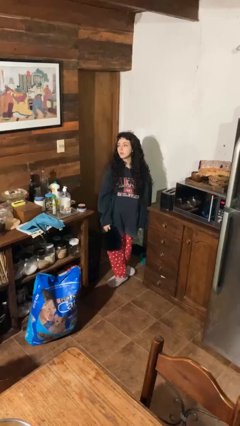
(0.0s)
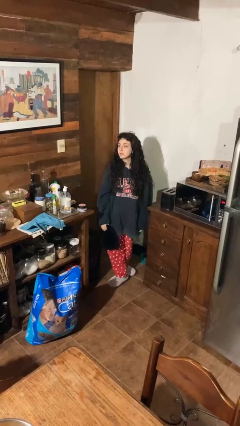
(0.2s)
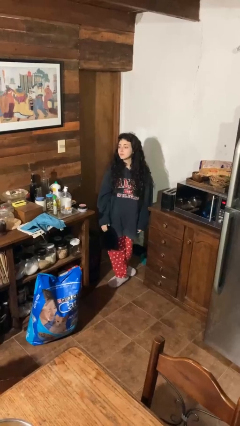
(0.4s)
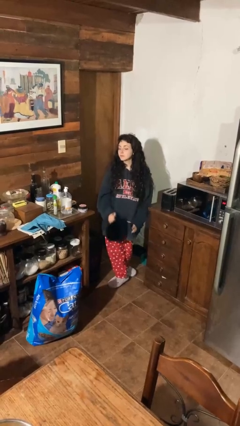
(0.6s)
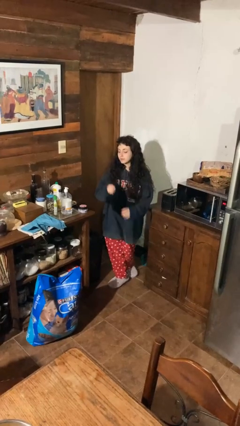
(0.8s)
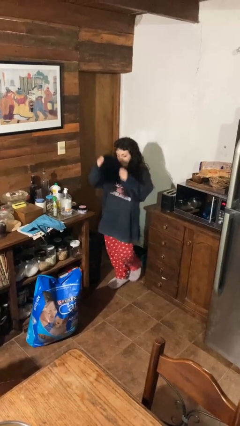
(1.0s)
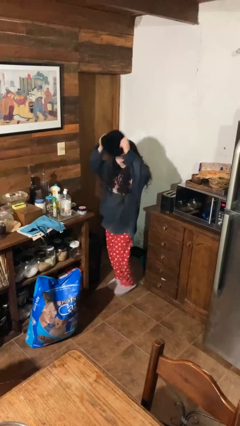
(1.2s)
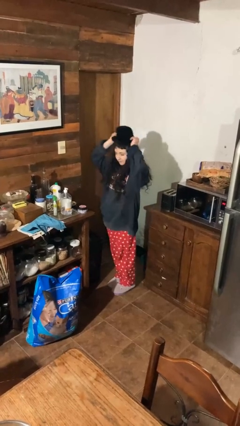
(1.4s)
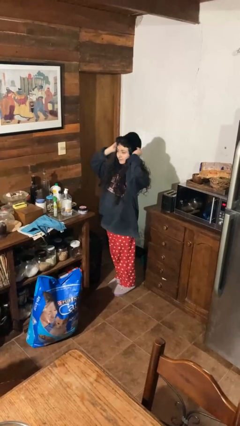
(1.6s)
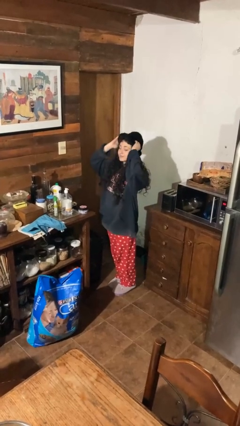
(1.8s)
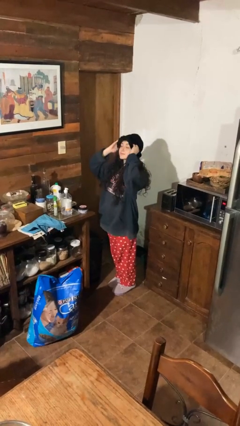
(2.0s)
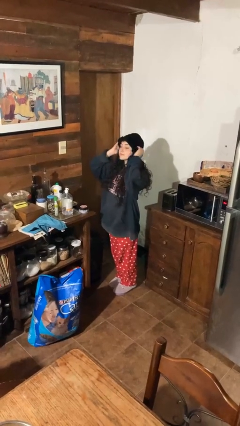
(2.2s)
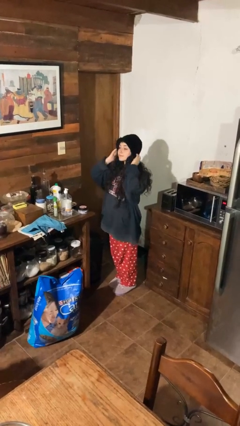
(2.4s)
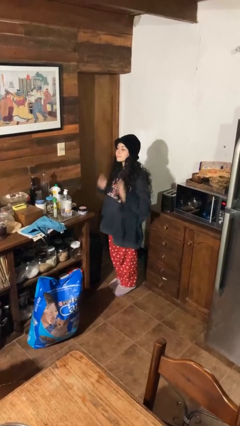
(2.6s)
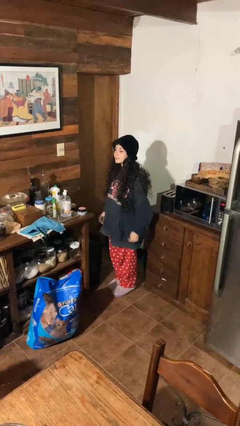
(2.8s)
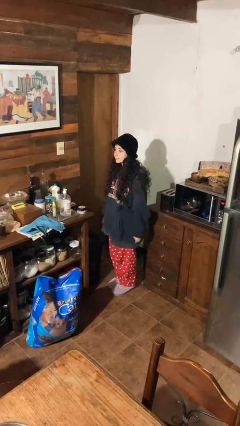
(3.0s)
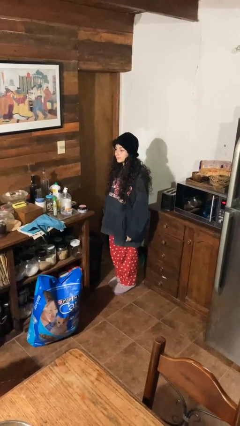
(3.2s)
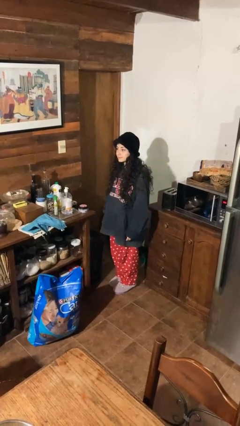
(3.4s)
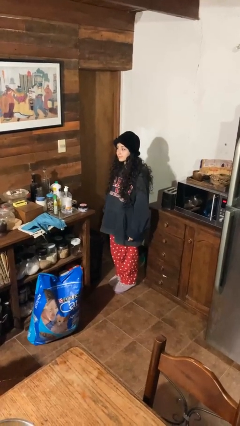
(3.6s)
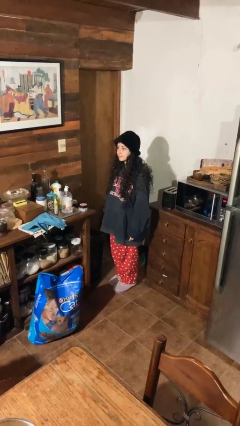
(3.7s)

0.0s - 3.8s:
person puts on hat

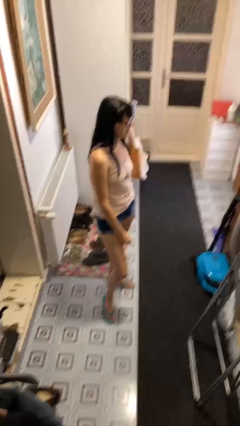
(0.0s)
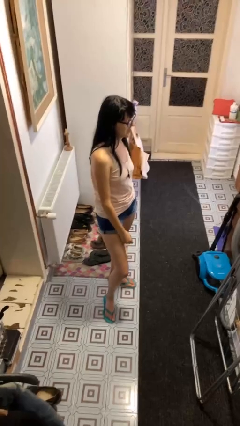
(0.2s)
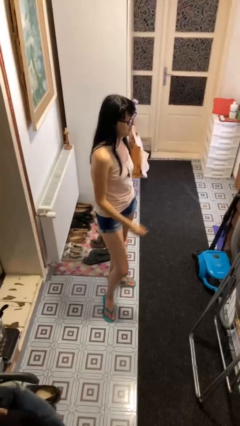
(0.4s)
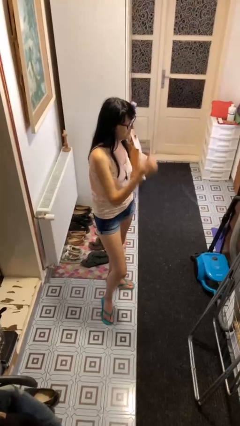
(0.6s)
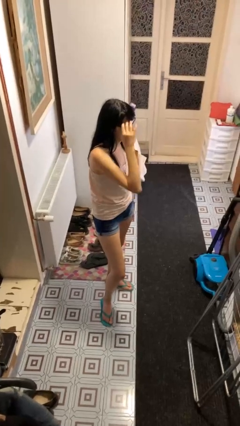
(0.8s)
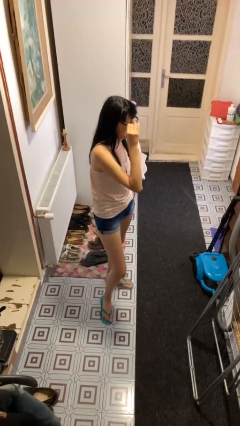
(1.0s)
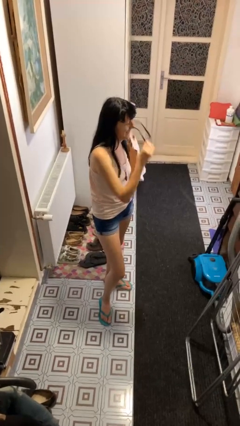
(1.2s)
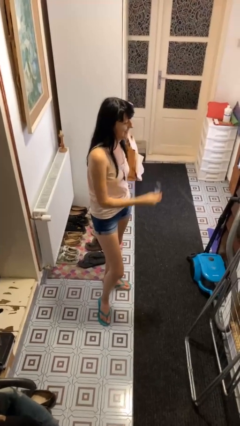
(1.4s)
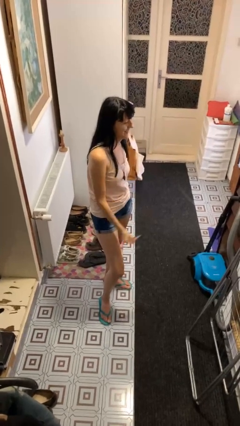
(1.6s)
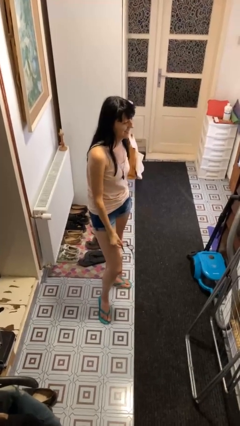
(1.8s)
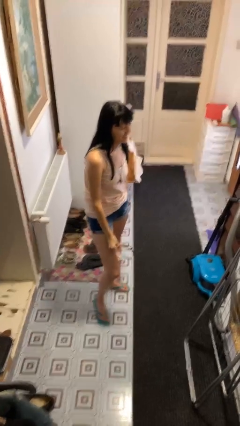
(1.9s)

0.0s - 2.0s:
person takes off glasses

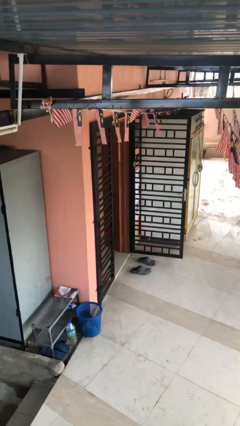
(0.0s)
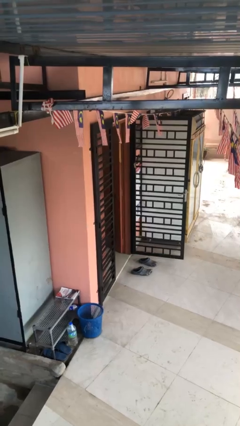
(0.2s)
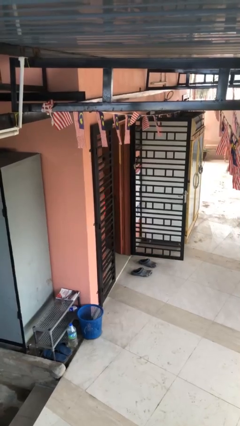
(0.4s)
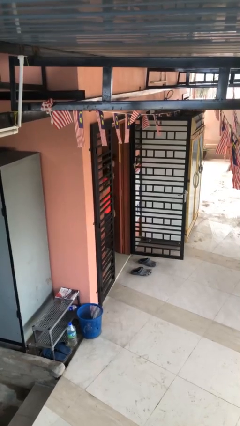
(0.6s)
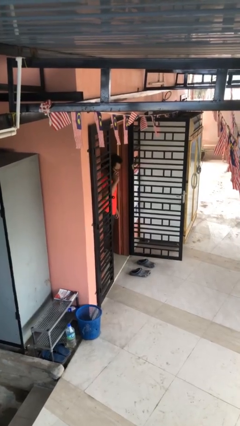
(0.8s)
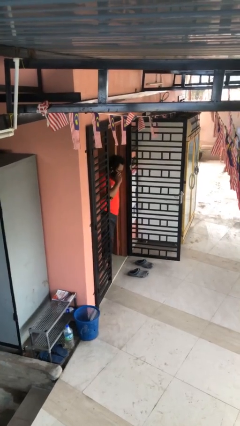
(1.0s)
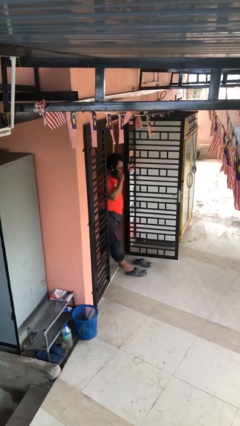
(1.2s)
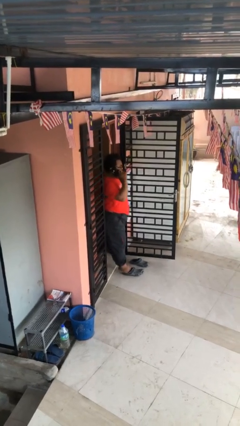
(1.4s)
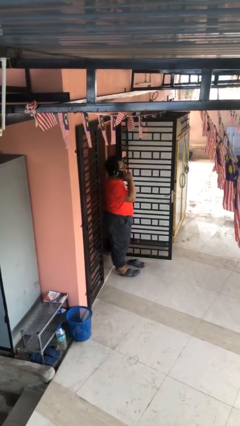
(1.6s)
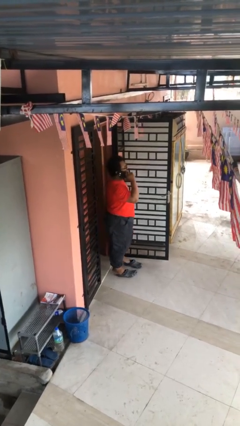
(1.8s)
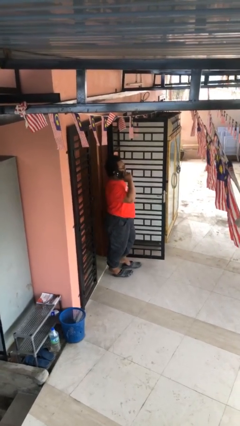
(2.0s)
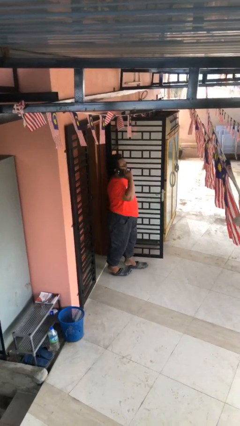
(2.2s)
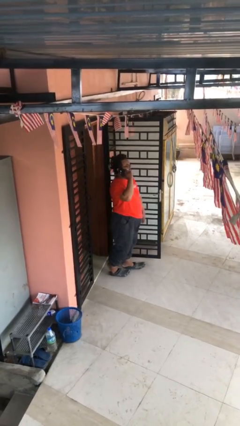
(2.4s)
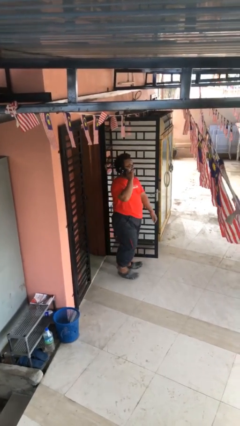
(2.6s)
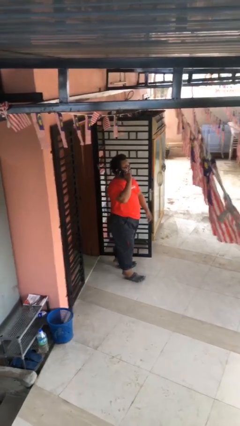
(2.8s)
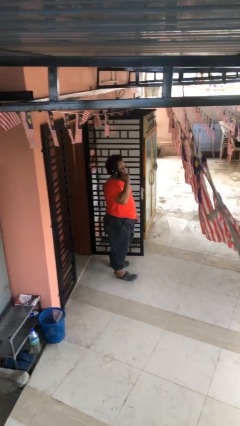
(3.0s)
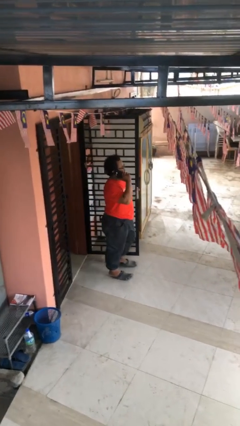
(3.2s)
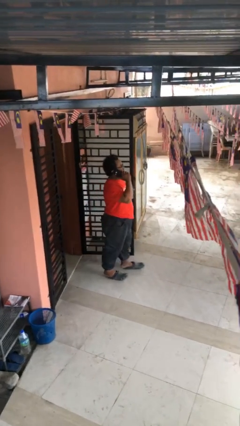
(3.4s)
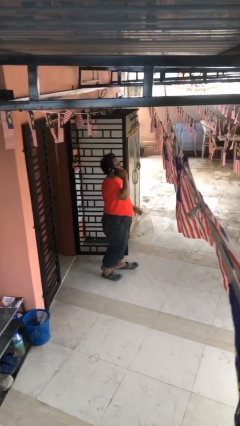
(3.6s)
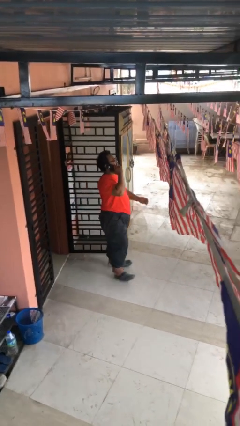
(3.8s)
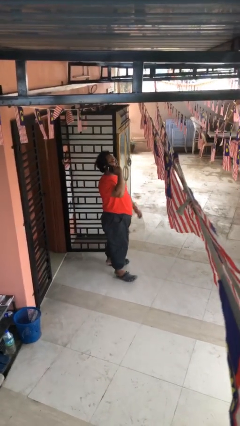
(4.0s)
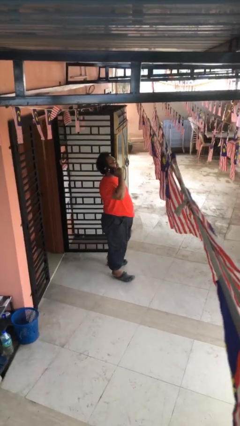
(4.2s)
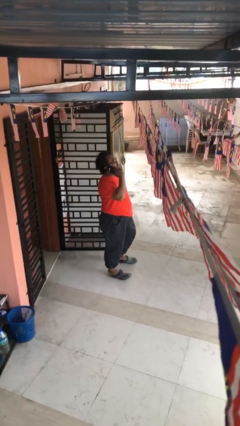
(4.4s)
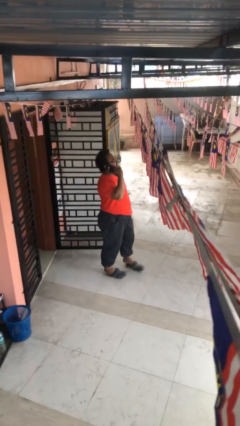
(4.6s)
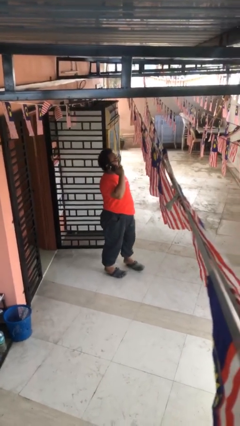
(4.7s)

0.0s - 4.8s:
person enters scene through structure

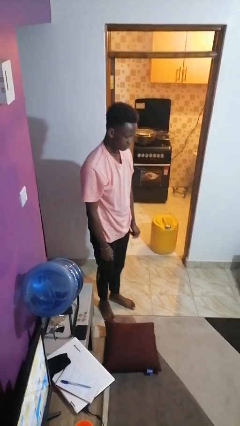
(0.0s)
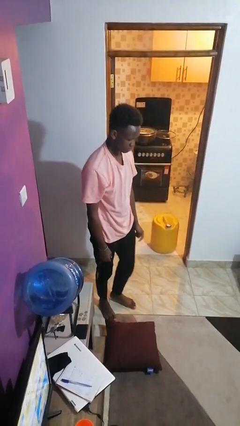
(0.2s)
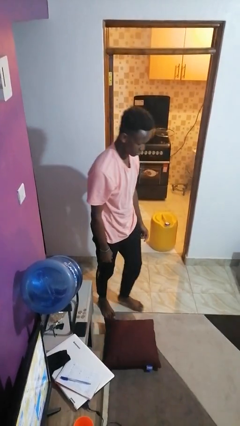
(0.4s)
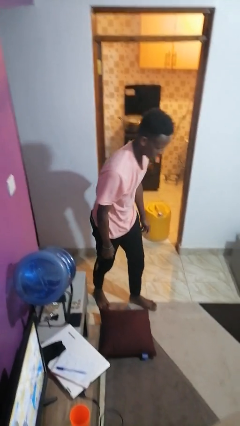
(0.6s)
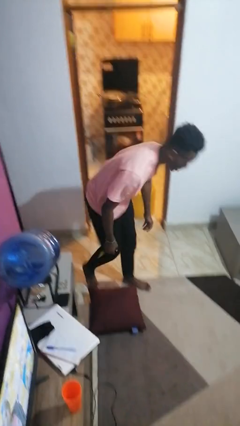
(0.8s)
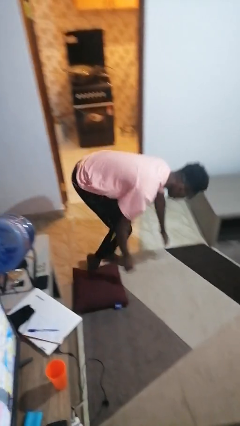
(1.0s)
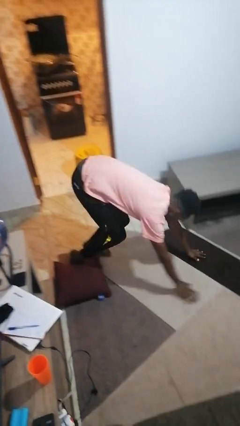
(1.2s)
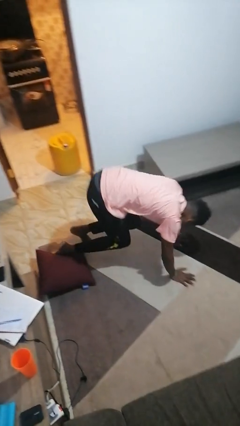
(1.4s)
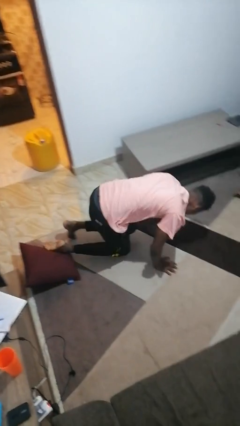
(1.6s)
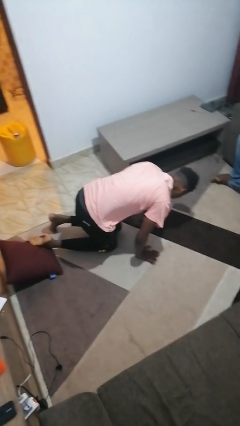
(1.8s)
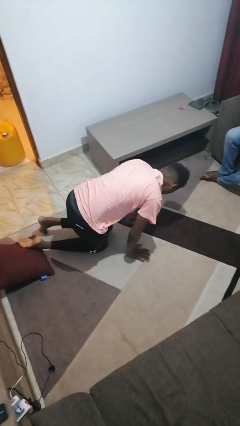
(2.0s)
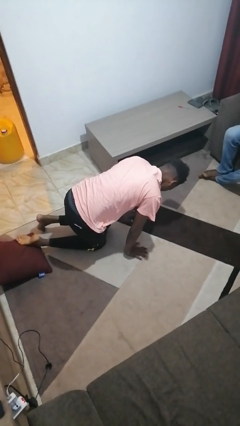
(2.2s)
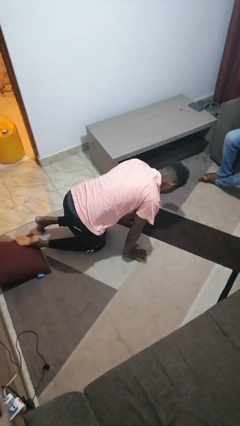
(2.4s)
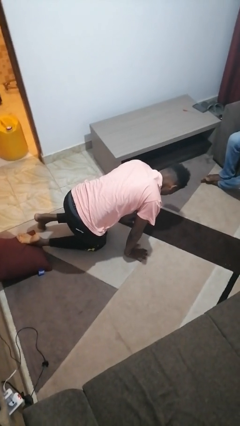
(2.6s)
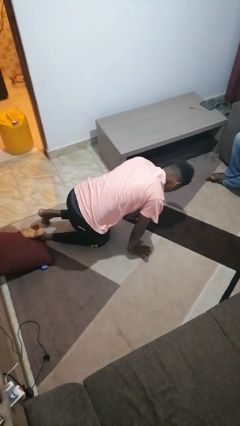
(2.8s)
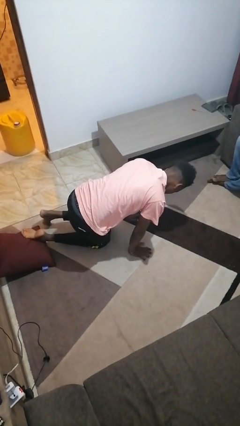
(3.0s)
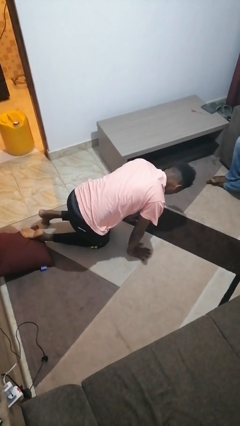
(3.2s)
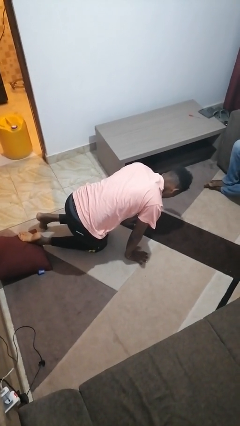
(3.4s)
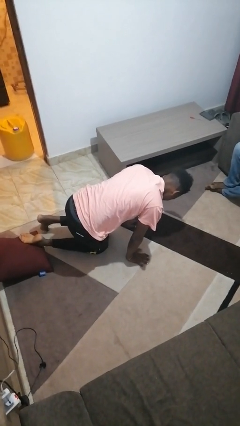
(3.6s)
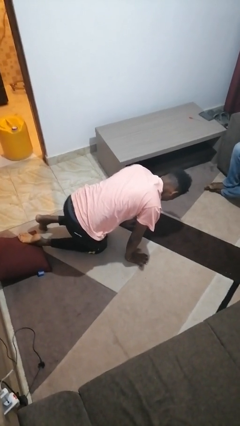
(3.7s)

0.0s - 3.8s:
person trips on object on floor

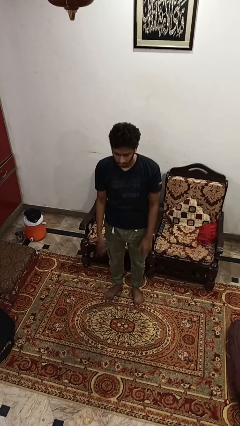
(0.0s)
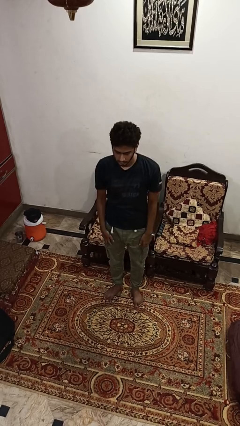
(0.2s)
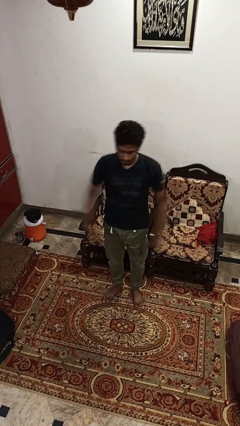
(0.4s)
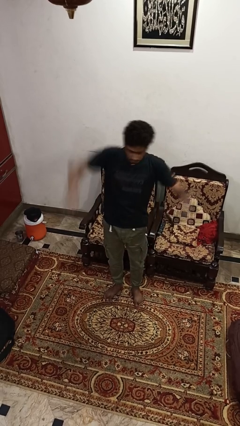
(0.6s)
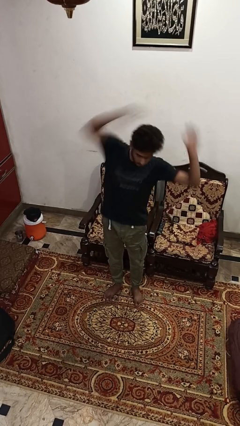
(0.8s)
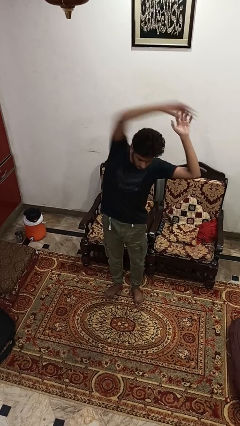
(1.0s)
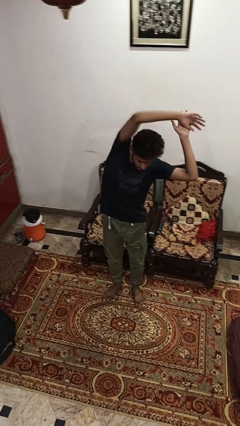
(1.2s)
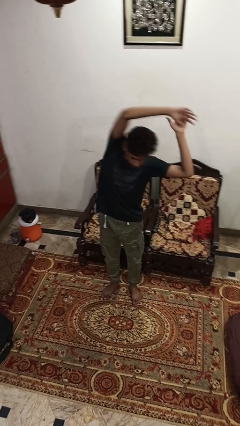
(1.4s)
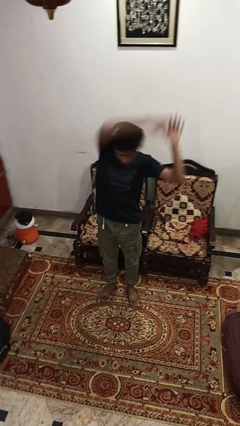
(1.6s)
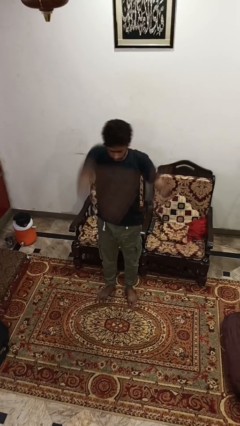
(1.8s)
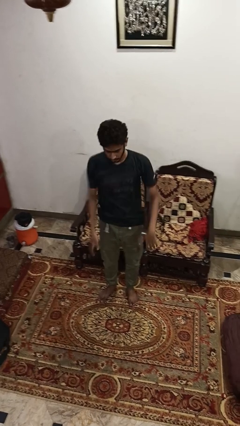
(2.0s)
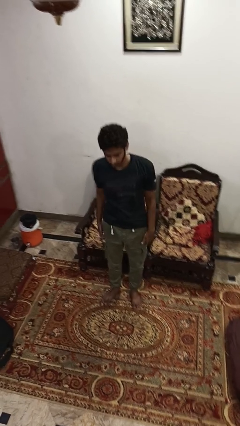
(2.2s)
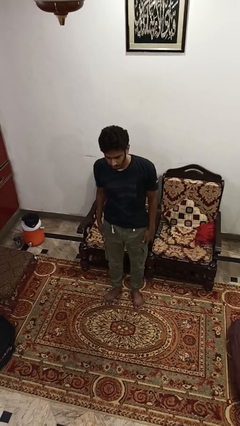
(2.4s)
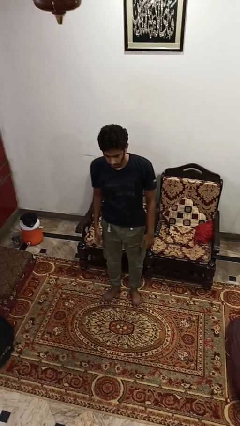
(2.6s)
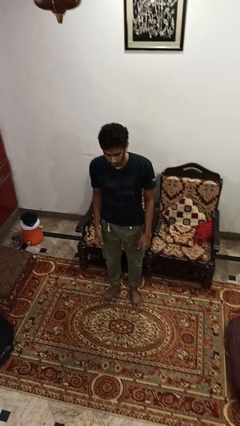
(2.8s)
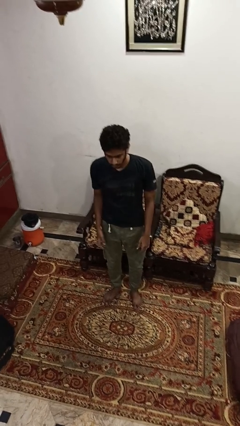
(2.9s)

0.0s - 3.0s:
person stretches arms to side

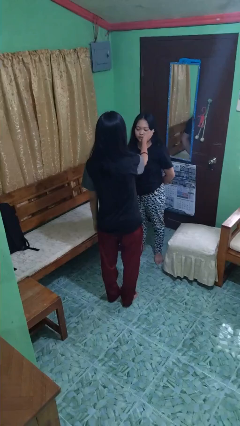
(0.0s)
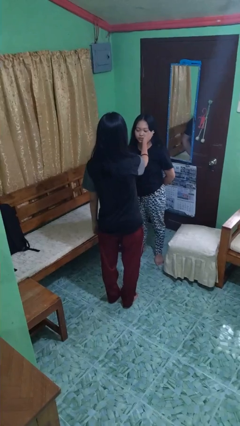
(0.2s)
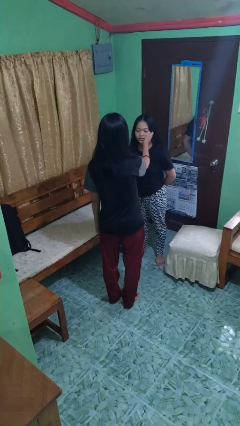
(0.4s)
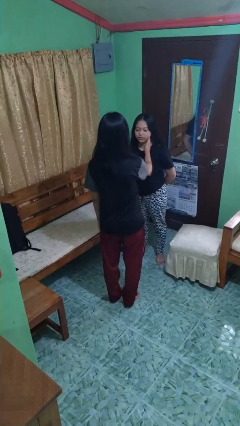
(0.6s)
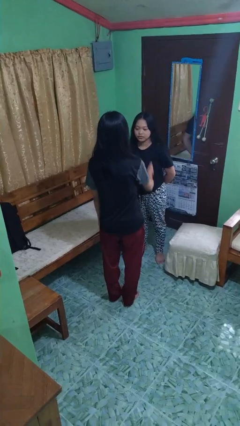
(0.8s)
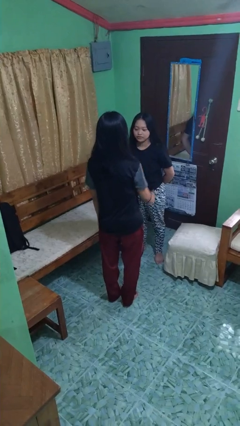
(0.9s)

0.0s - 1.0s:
person touches face of person
